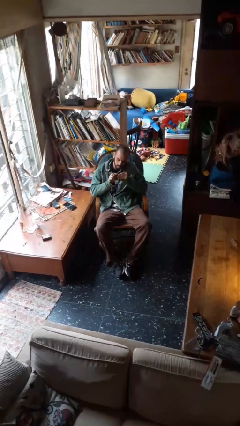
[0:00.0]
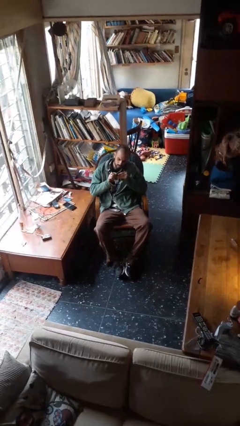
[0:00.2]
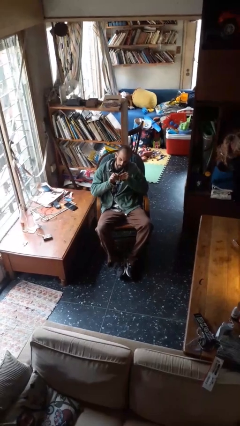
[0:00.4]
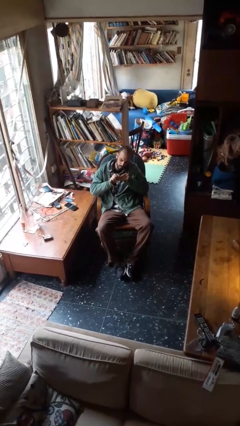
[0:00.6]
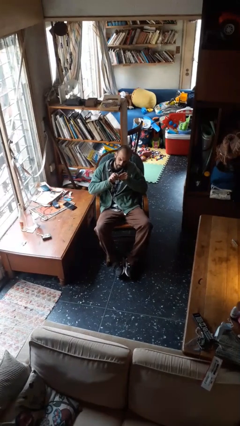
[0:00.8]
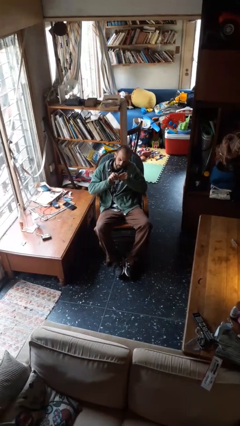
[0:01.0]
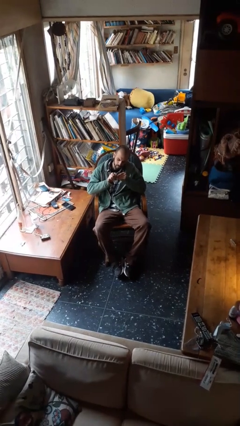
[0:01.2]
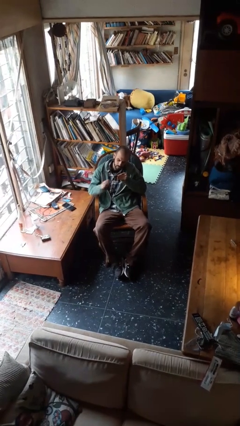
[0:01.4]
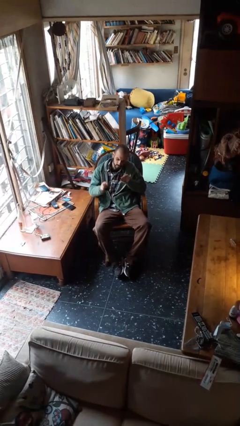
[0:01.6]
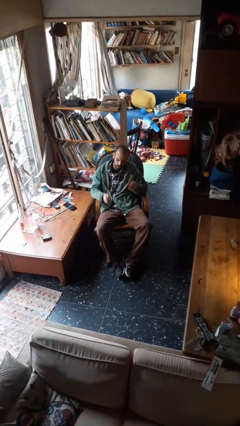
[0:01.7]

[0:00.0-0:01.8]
person files fingernails

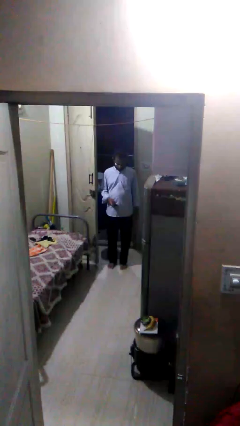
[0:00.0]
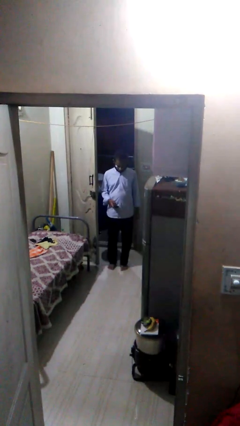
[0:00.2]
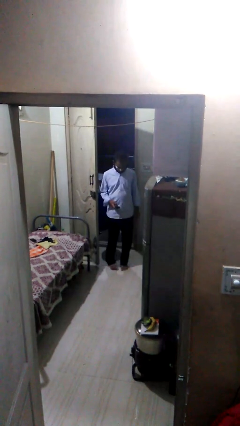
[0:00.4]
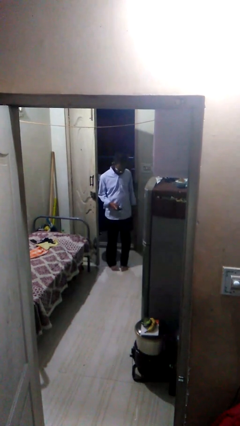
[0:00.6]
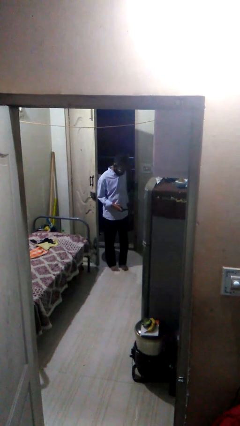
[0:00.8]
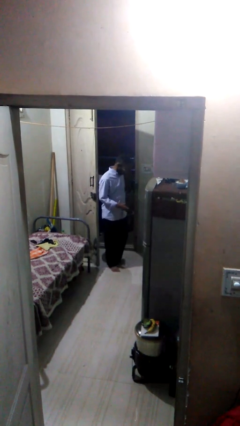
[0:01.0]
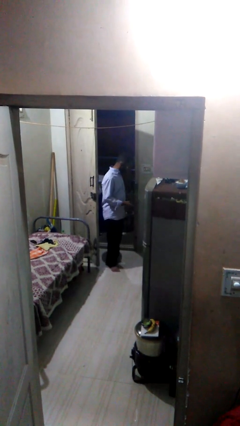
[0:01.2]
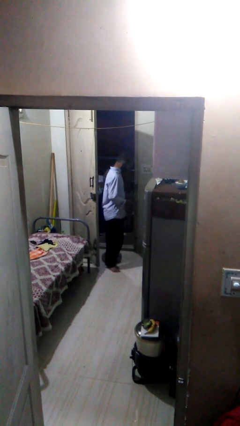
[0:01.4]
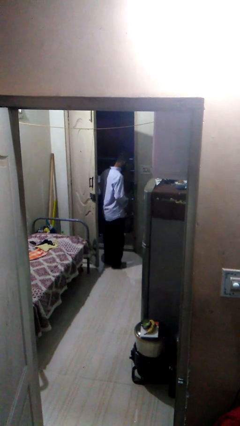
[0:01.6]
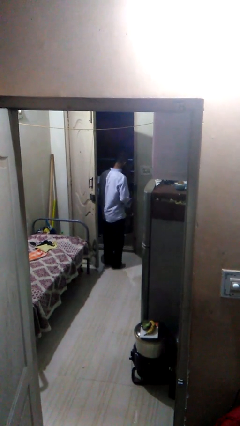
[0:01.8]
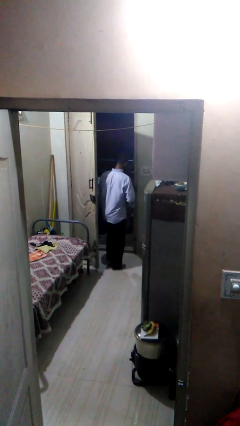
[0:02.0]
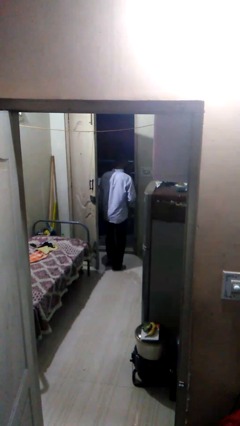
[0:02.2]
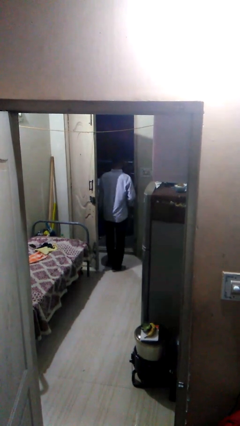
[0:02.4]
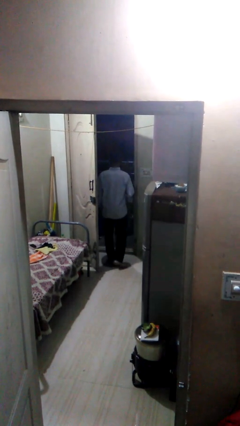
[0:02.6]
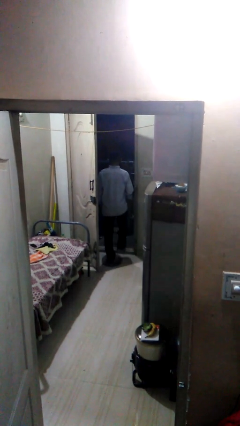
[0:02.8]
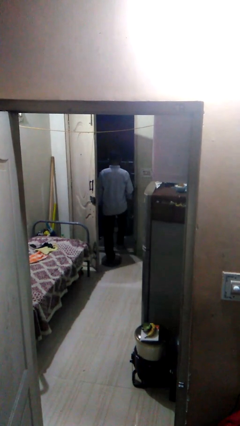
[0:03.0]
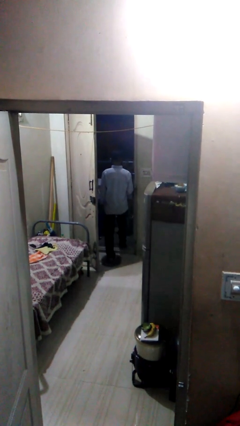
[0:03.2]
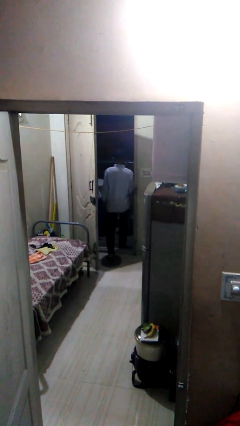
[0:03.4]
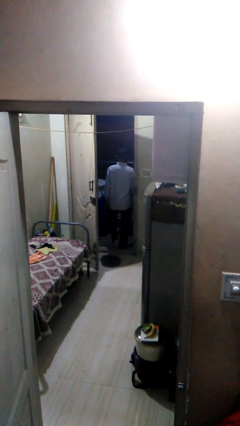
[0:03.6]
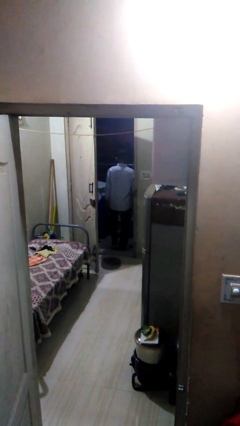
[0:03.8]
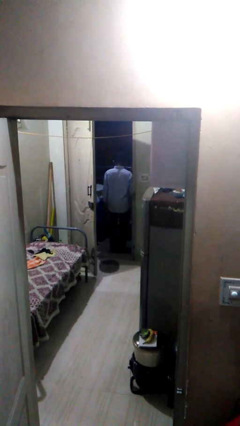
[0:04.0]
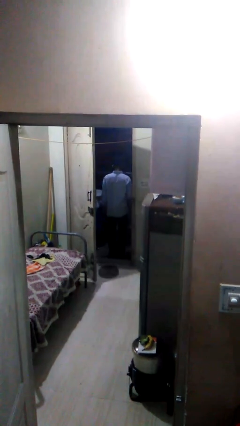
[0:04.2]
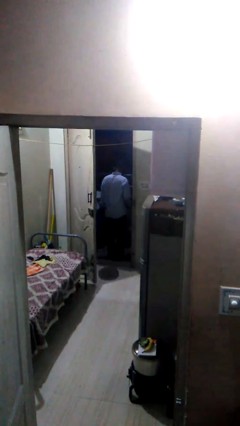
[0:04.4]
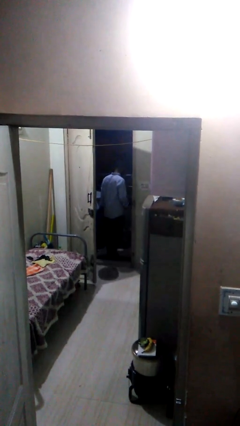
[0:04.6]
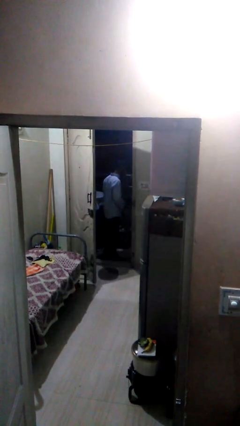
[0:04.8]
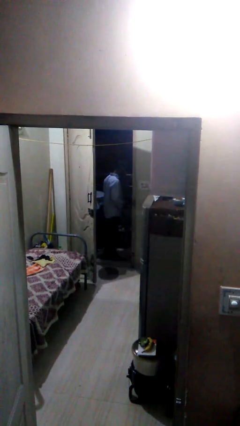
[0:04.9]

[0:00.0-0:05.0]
person exits scene through structure

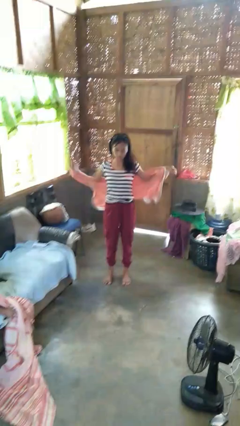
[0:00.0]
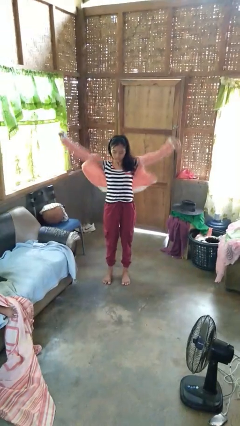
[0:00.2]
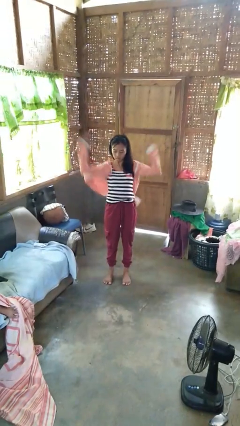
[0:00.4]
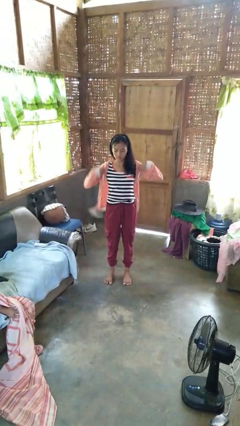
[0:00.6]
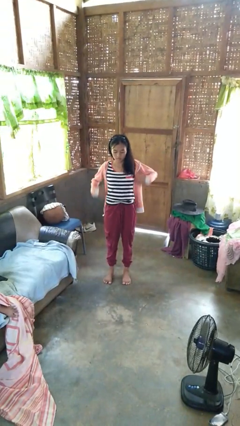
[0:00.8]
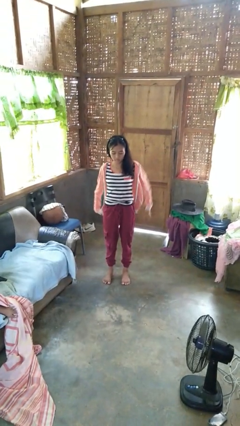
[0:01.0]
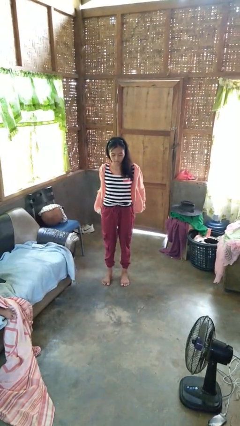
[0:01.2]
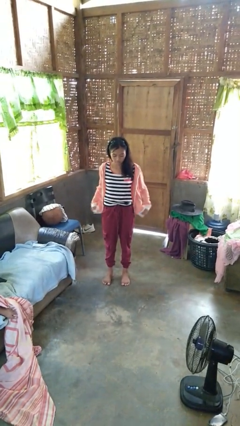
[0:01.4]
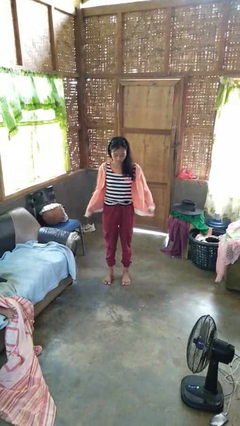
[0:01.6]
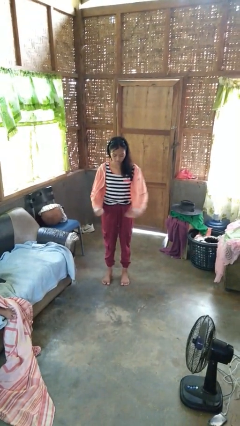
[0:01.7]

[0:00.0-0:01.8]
person puts on jacket

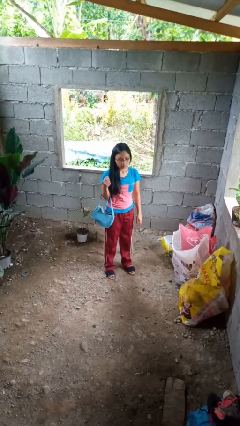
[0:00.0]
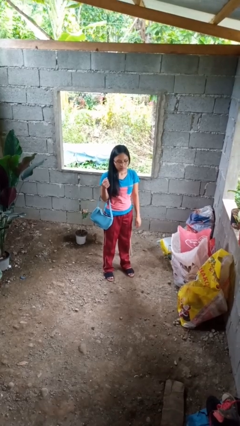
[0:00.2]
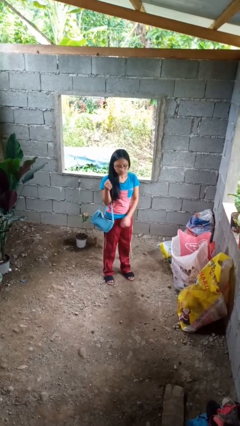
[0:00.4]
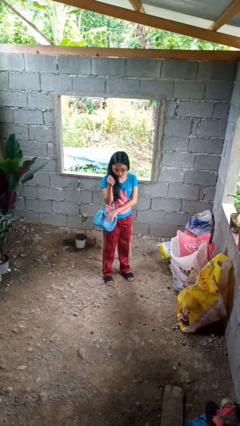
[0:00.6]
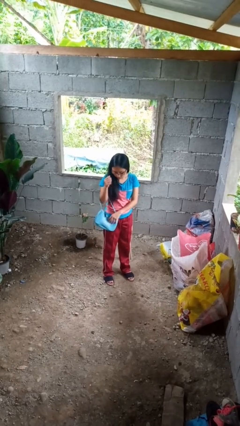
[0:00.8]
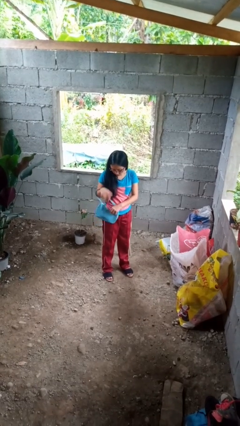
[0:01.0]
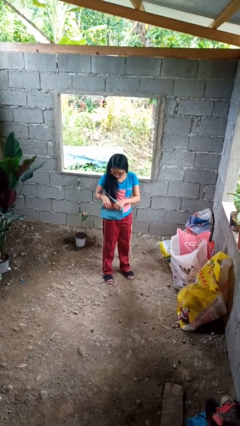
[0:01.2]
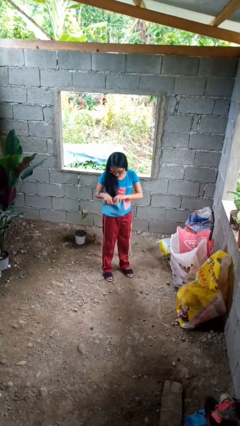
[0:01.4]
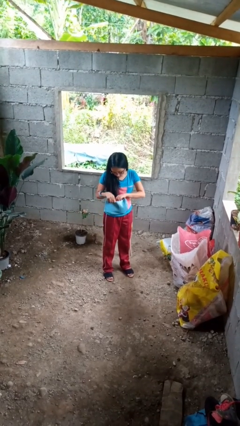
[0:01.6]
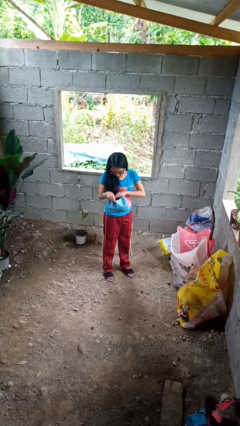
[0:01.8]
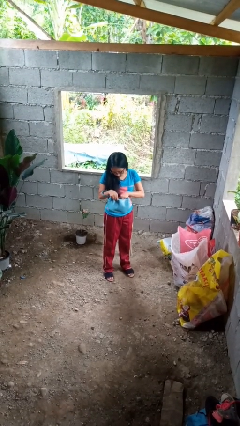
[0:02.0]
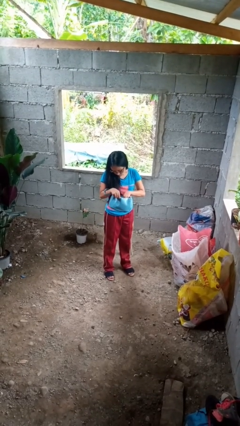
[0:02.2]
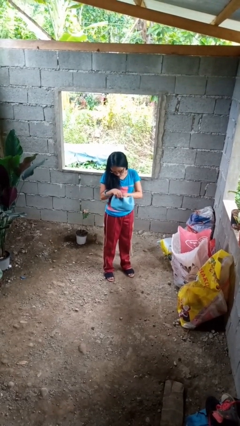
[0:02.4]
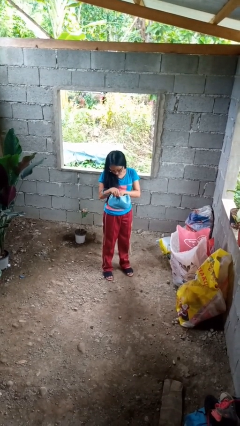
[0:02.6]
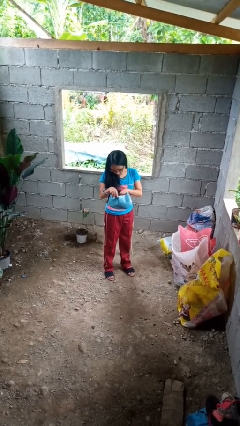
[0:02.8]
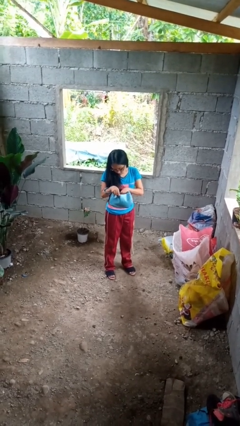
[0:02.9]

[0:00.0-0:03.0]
person searches in purse

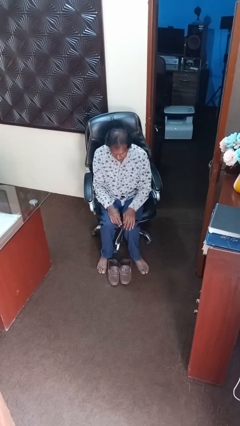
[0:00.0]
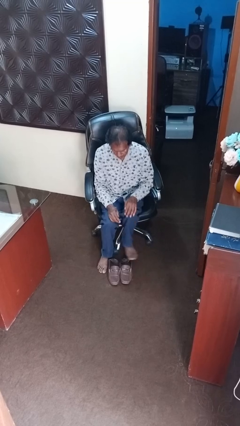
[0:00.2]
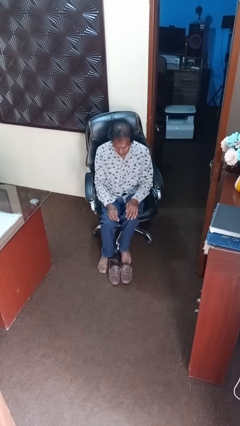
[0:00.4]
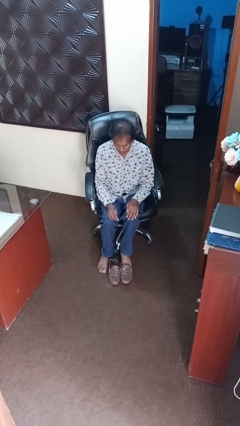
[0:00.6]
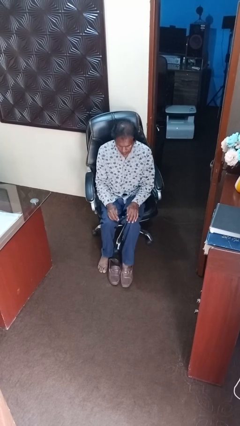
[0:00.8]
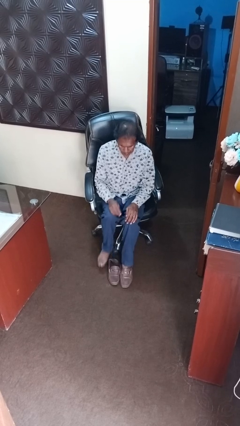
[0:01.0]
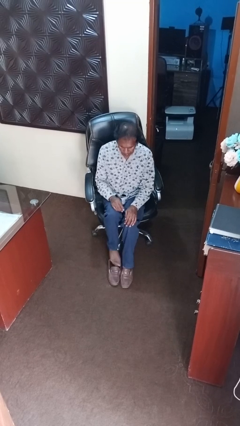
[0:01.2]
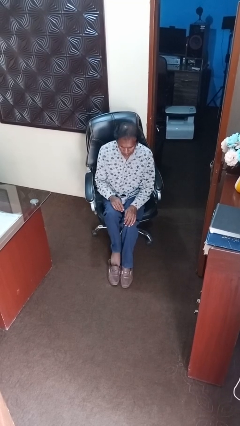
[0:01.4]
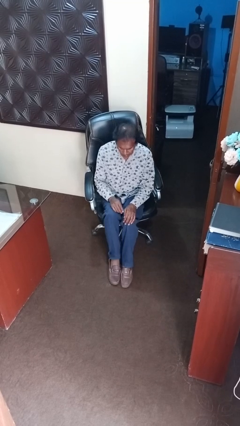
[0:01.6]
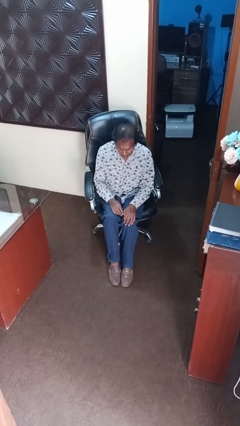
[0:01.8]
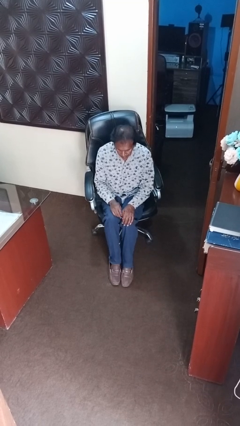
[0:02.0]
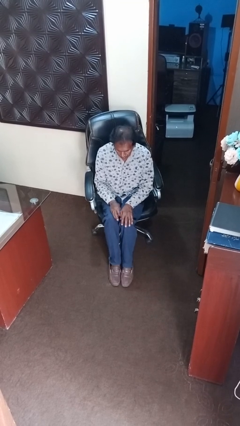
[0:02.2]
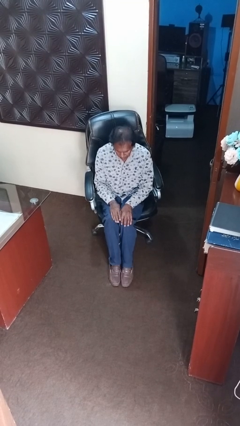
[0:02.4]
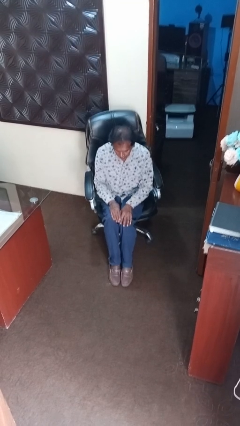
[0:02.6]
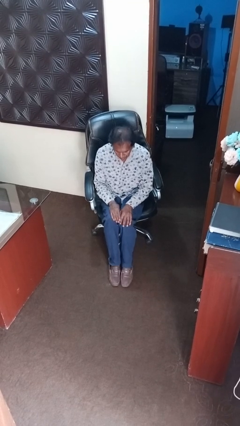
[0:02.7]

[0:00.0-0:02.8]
person puts on shoes

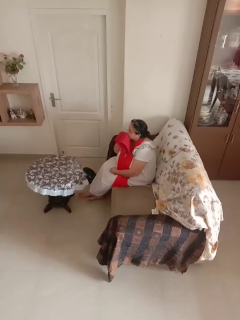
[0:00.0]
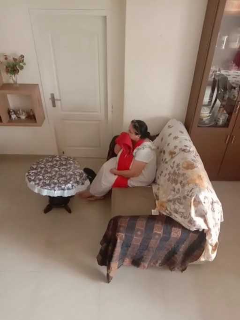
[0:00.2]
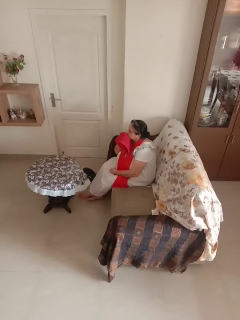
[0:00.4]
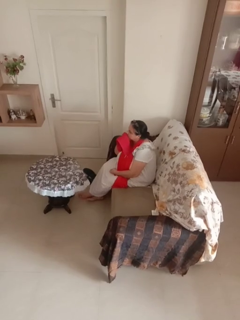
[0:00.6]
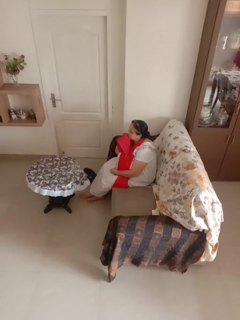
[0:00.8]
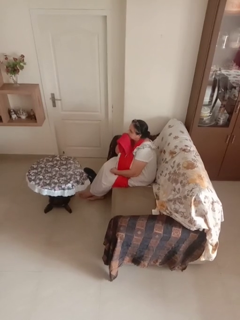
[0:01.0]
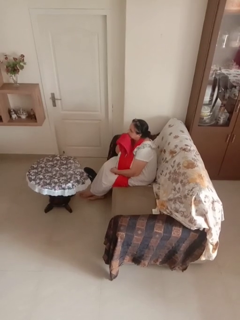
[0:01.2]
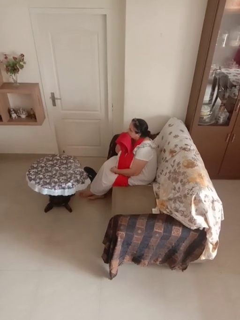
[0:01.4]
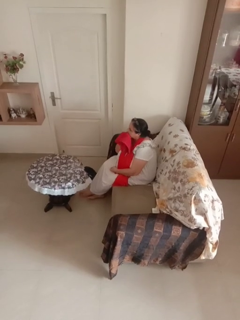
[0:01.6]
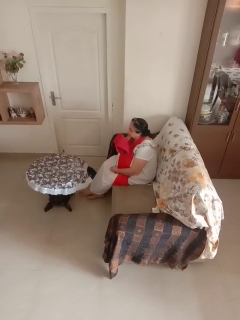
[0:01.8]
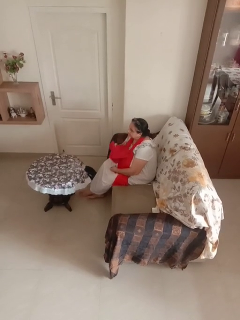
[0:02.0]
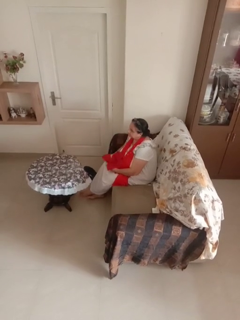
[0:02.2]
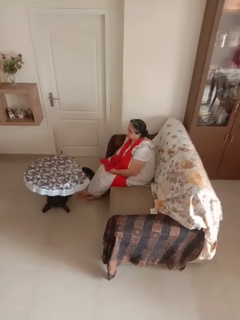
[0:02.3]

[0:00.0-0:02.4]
person wipes mouth with napkin

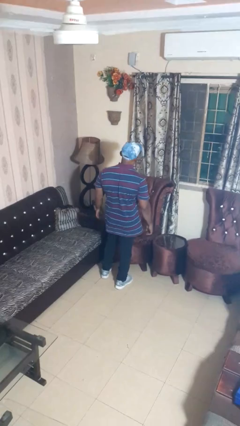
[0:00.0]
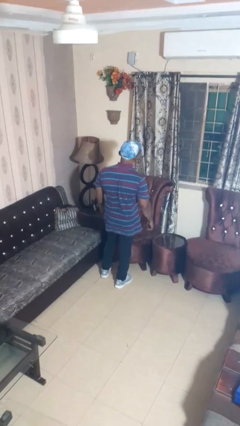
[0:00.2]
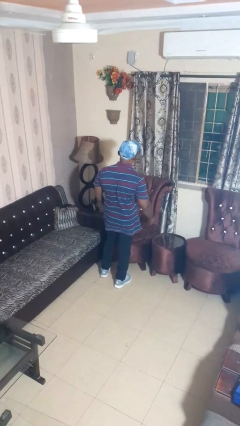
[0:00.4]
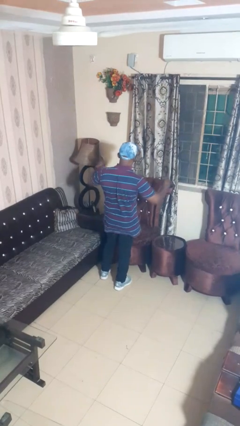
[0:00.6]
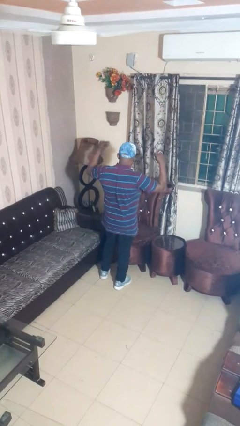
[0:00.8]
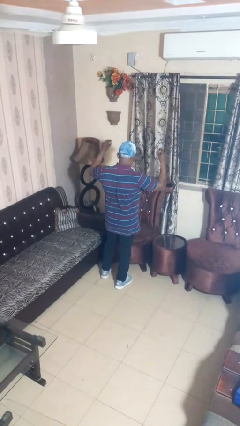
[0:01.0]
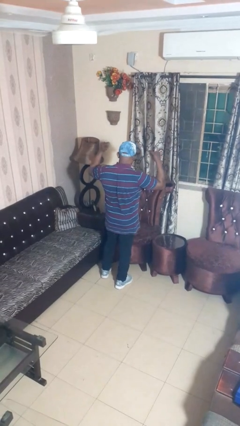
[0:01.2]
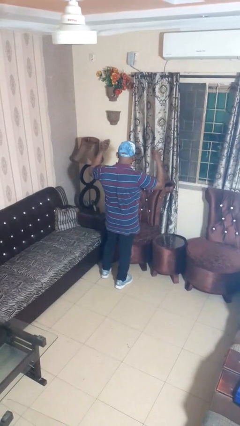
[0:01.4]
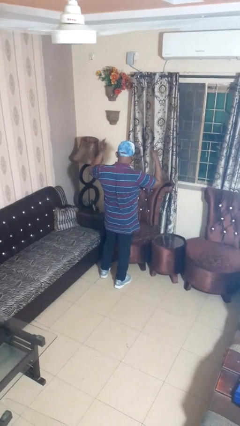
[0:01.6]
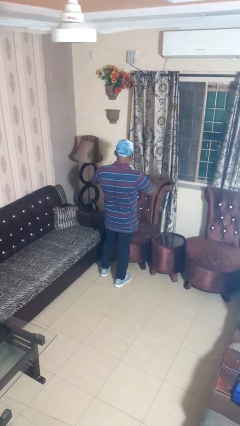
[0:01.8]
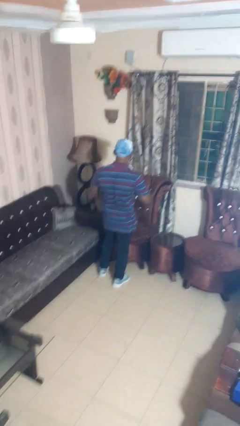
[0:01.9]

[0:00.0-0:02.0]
person snaps fingers
